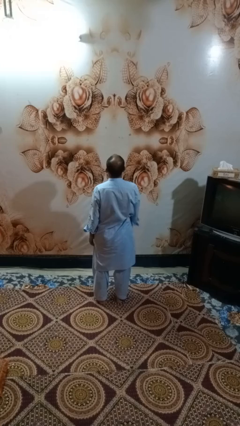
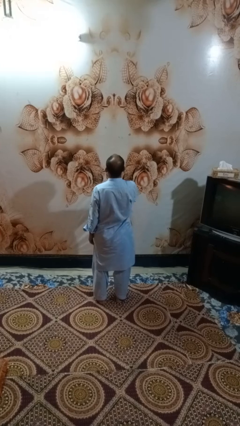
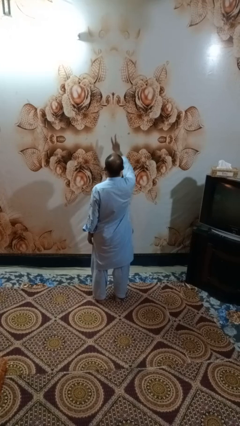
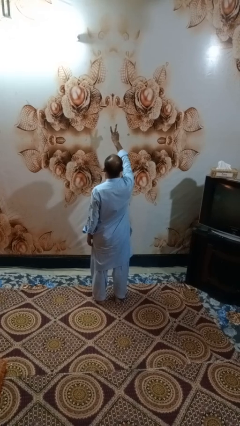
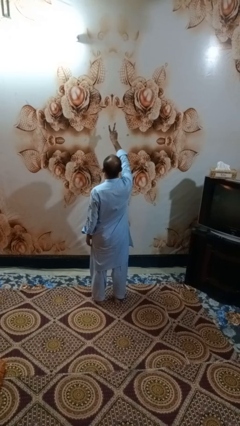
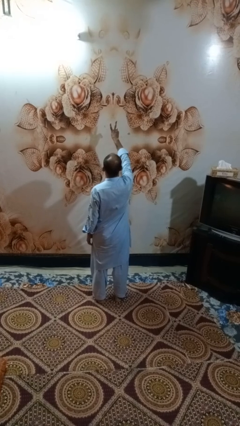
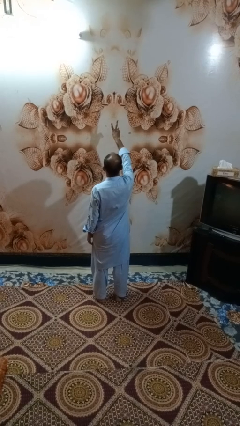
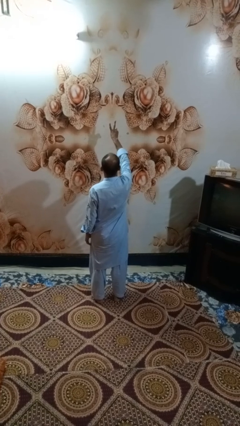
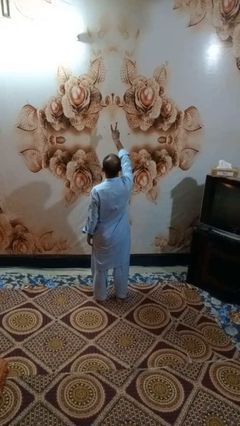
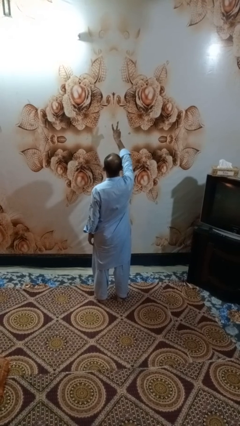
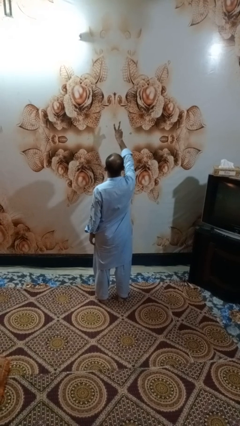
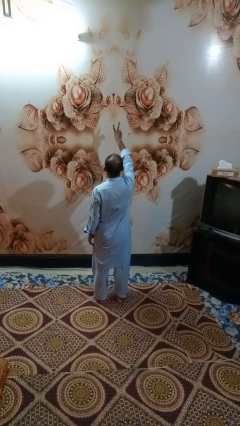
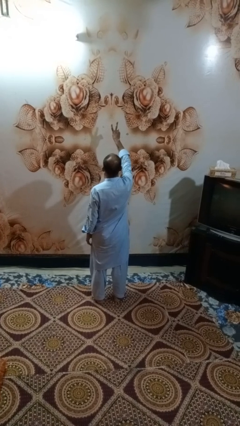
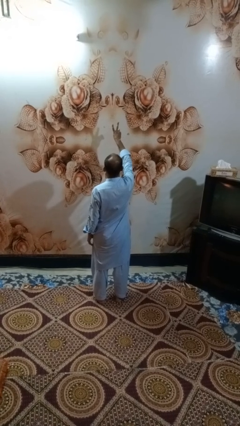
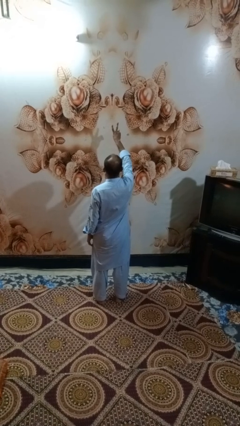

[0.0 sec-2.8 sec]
person gestures peace

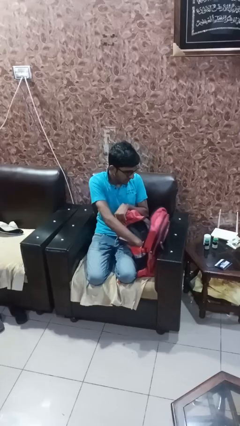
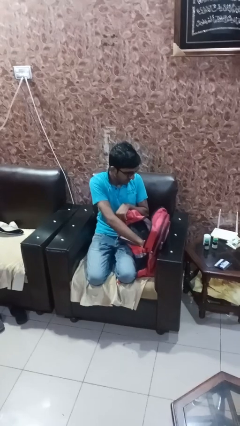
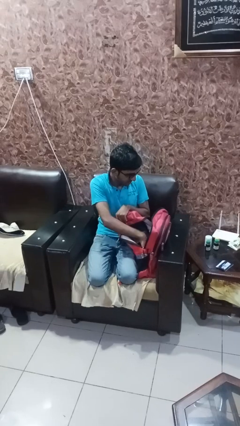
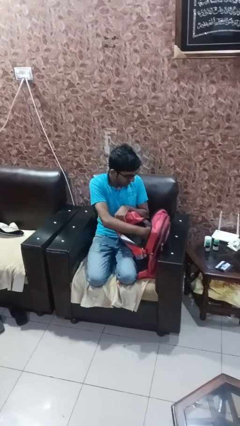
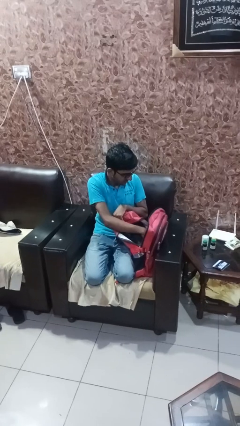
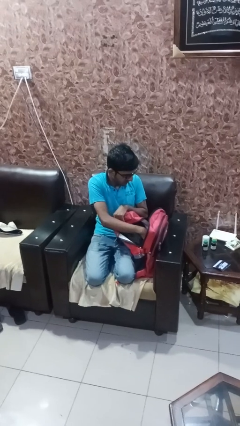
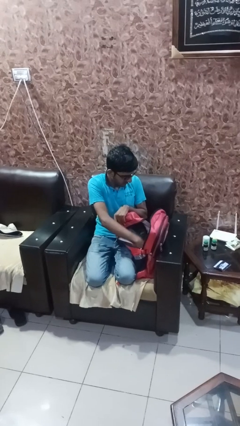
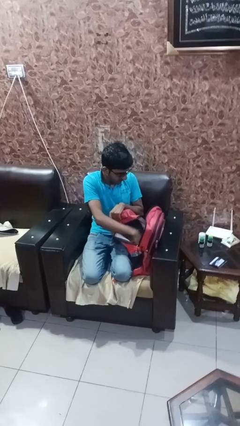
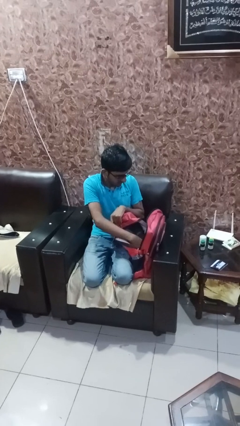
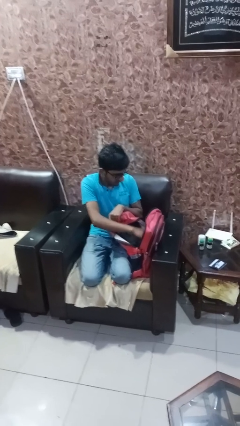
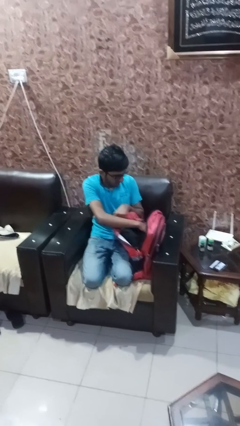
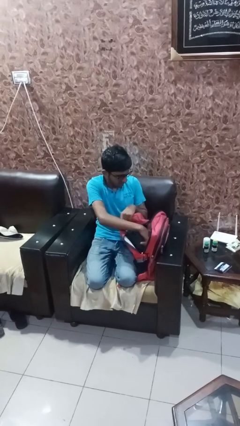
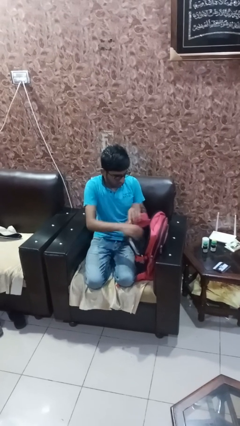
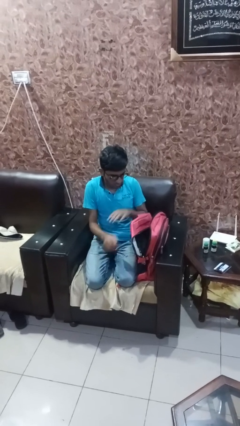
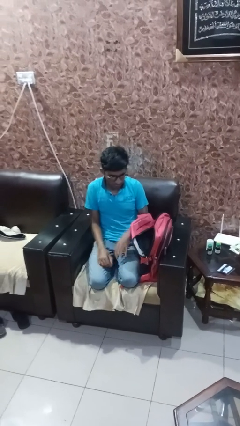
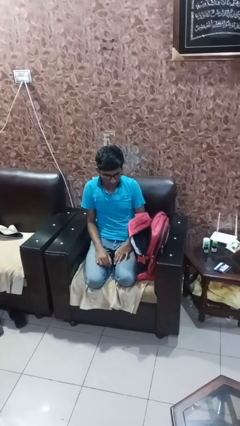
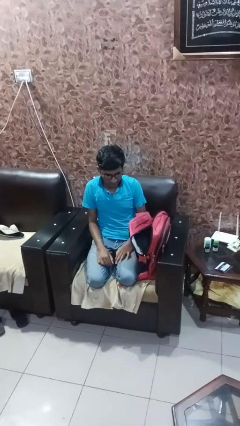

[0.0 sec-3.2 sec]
person searches in bag

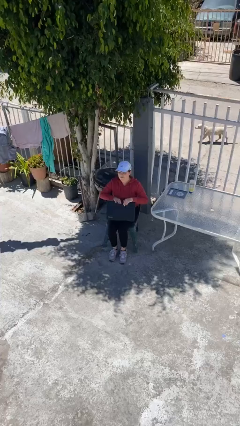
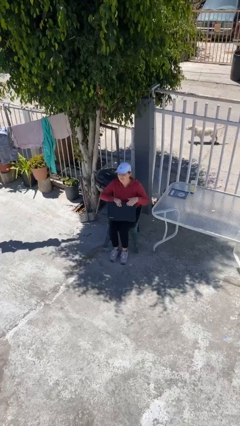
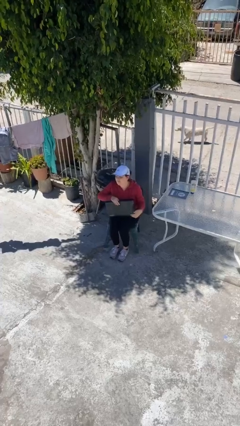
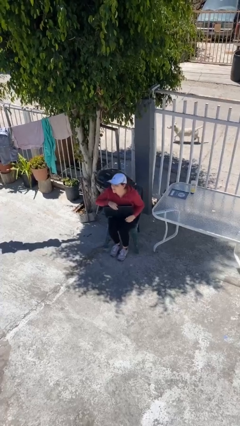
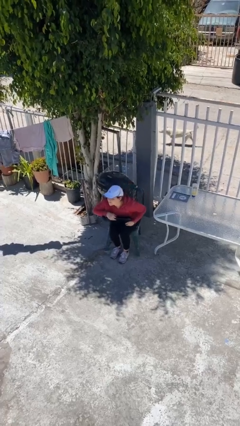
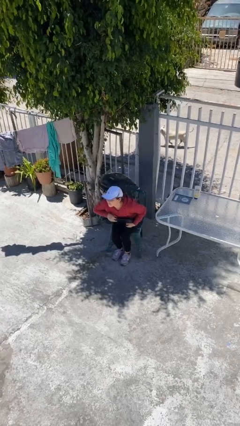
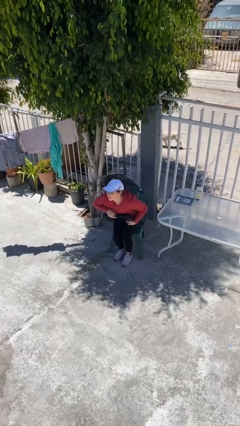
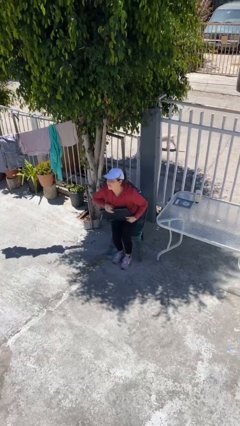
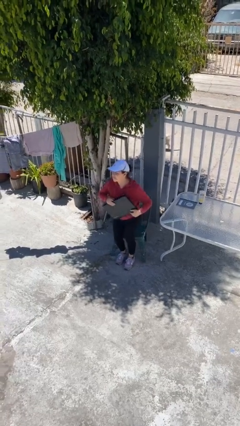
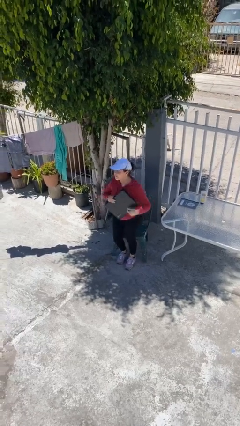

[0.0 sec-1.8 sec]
person stands up

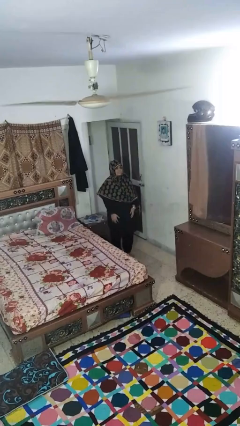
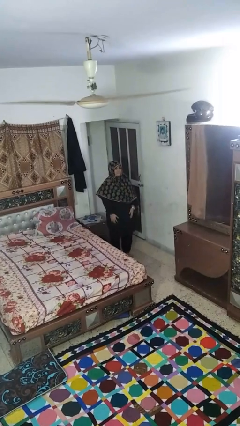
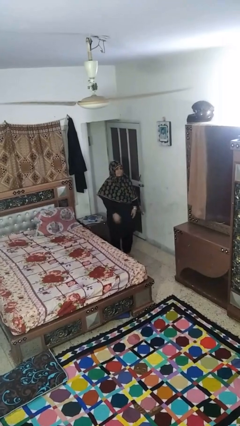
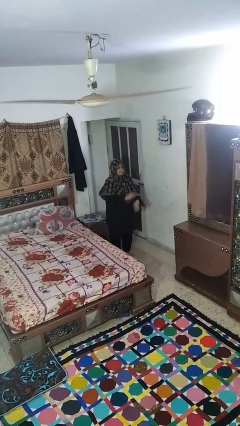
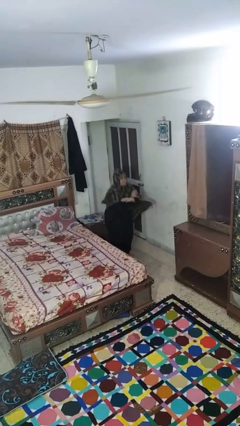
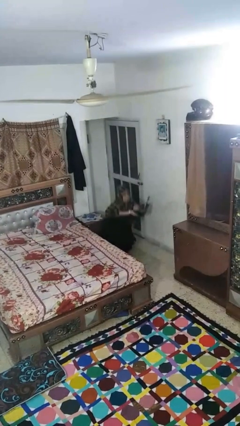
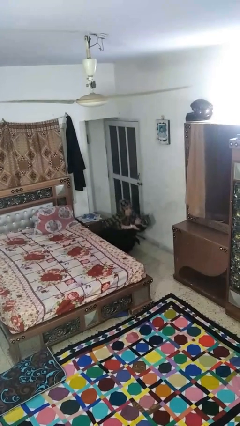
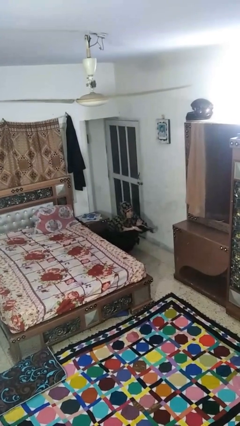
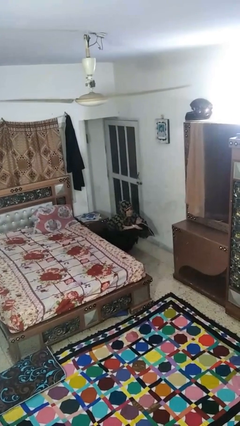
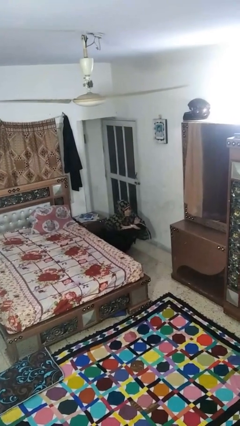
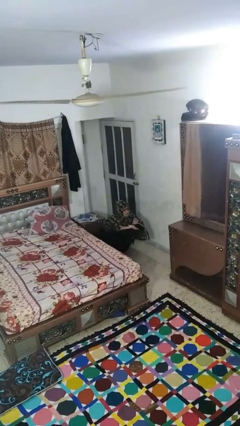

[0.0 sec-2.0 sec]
person squats

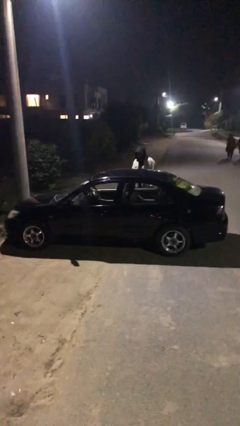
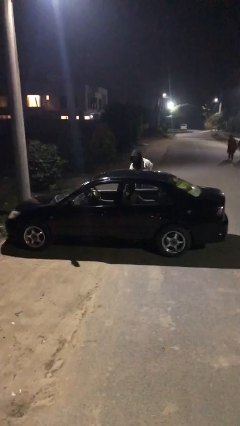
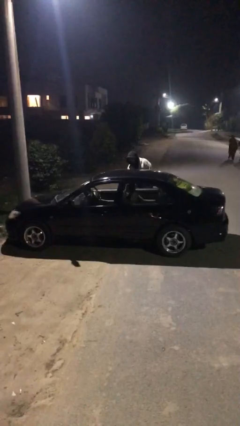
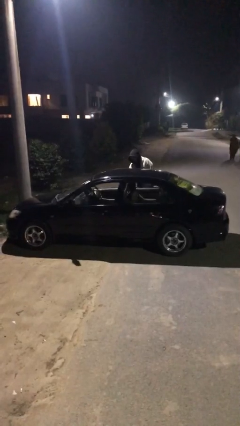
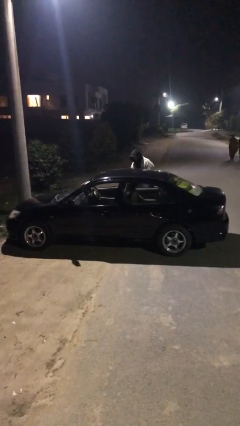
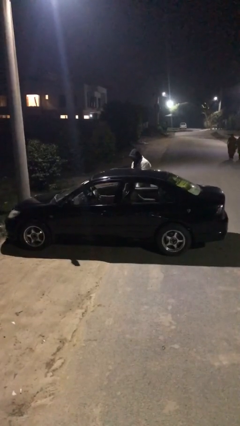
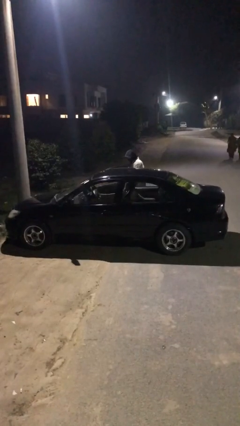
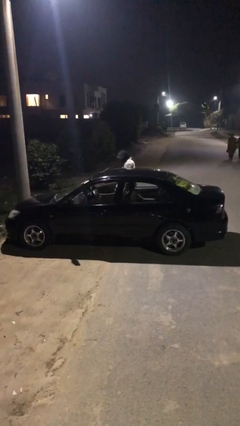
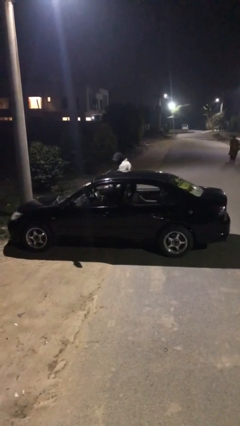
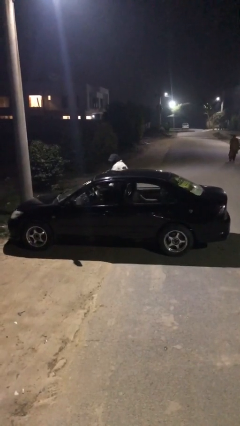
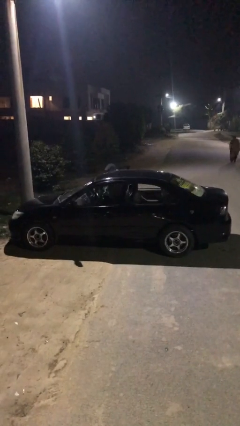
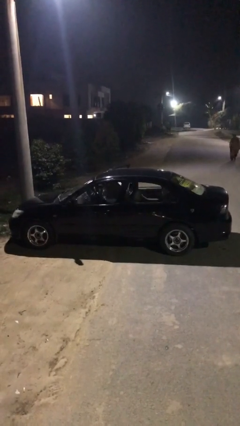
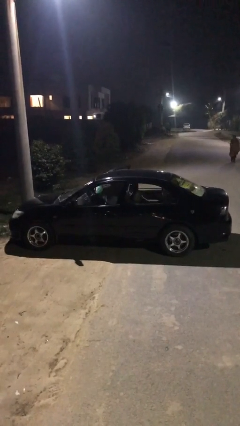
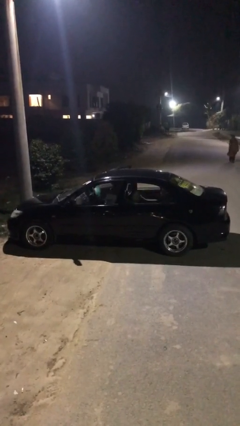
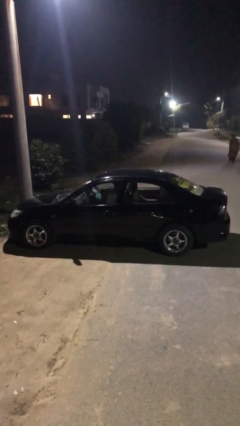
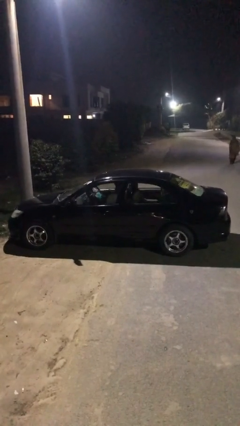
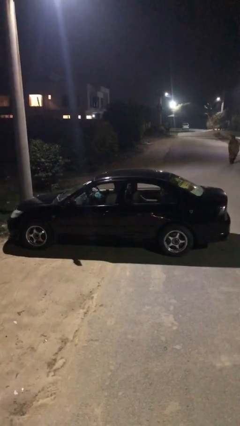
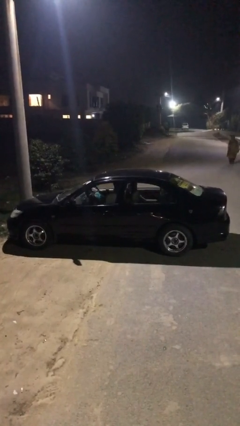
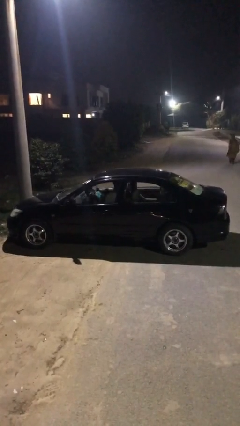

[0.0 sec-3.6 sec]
car picks up person

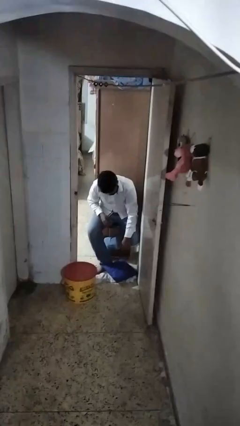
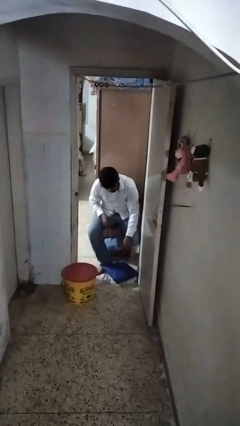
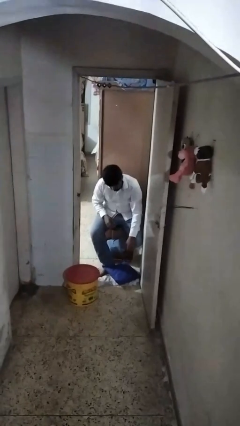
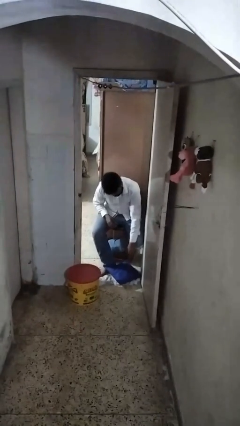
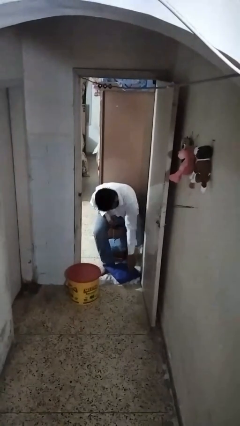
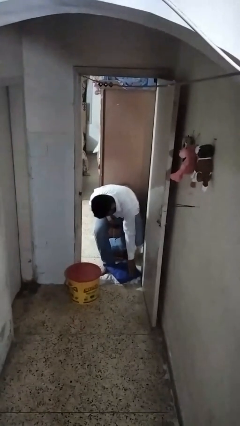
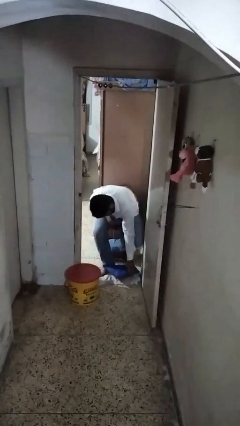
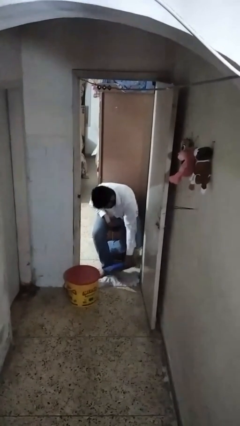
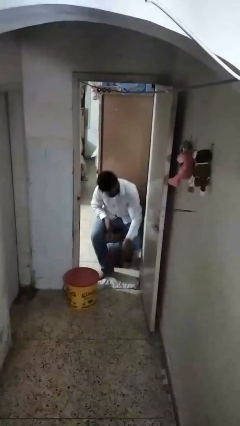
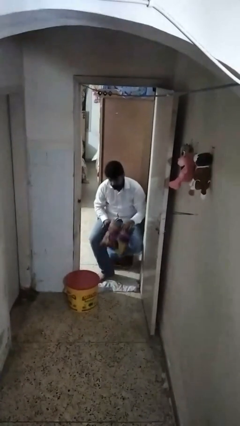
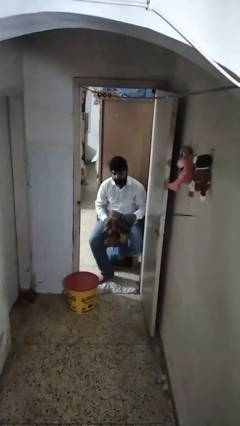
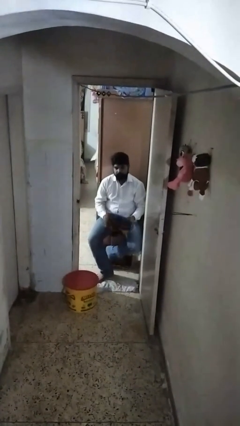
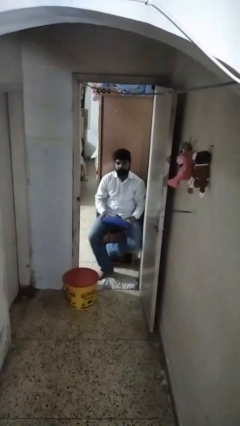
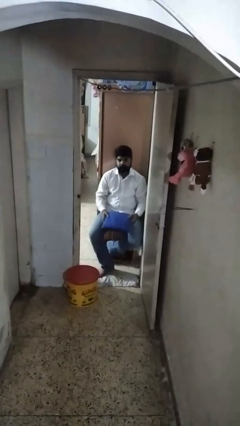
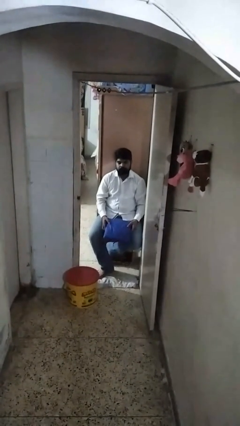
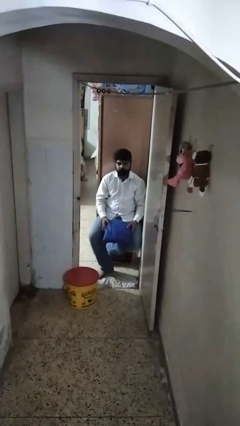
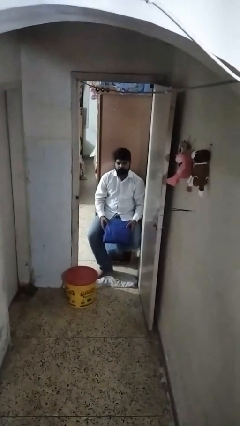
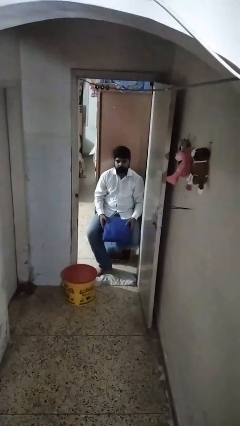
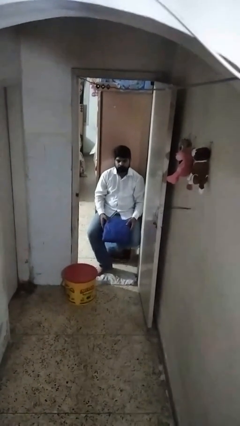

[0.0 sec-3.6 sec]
person picks up object from floor

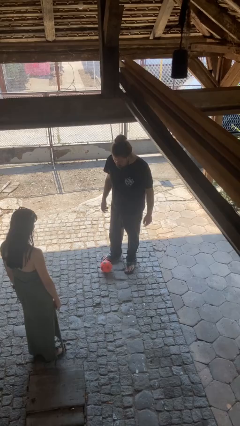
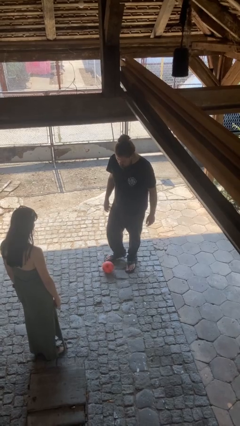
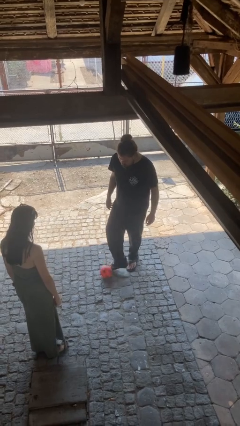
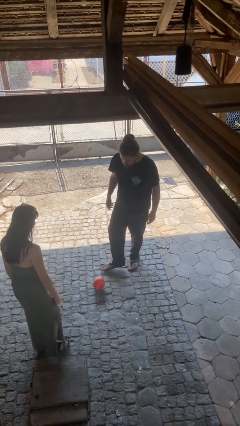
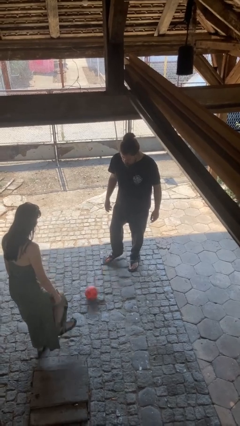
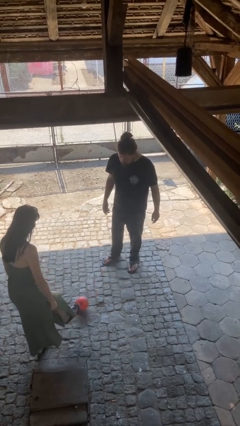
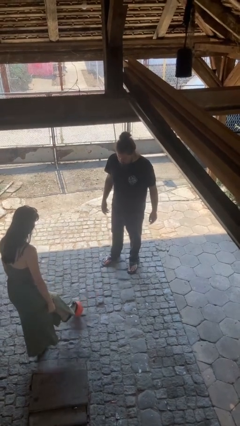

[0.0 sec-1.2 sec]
person kicks object to person
